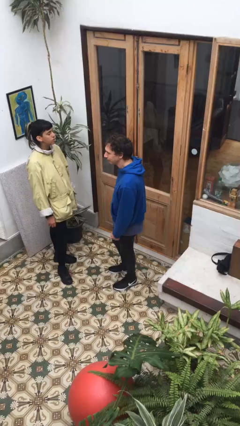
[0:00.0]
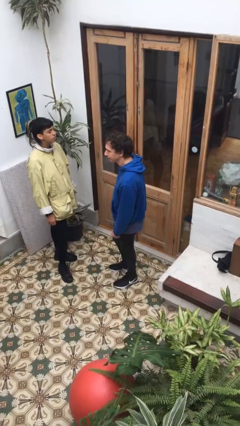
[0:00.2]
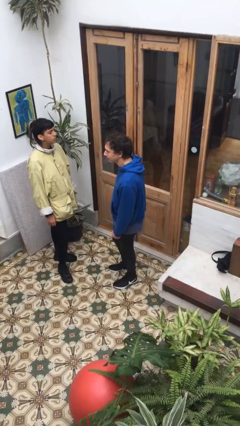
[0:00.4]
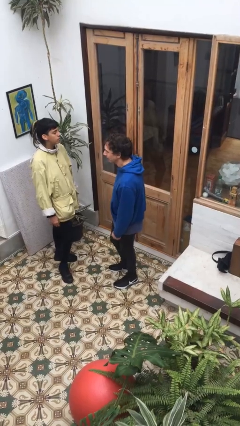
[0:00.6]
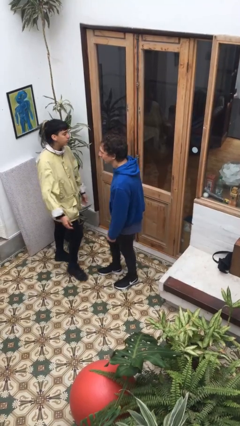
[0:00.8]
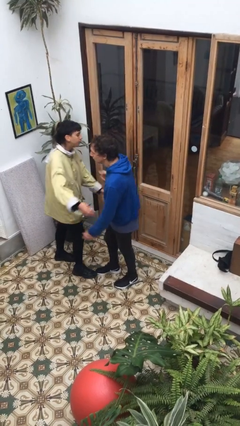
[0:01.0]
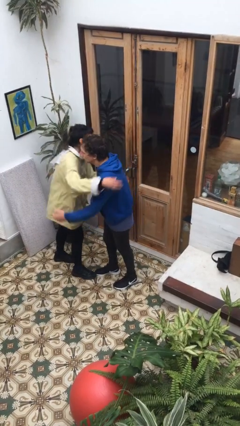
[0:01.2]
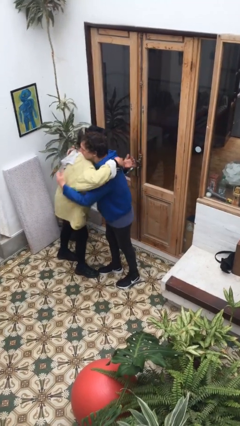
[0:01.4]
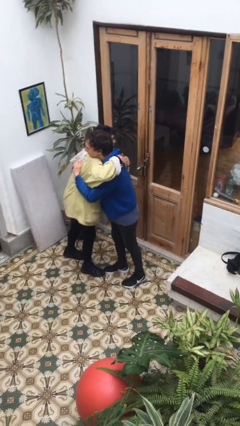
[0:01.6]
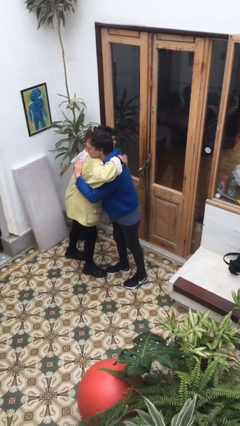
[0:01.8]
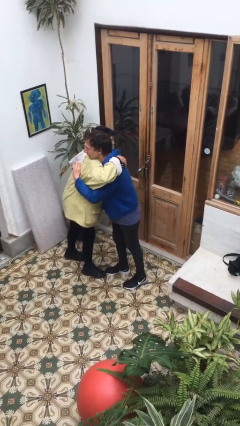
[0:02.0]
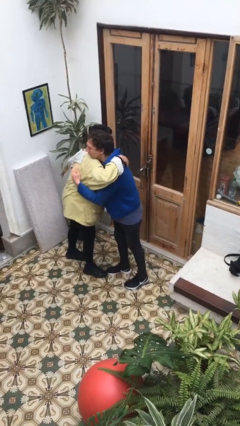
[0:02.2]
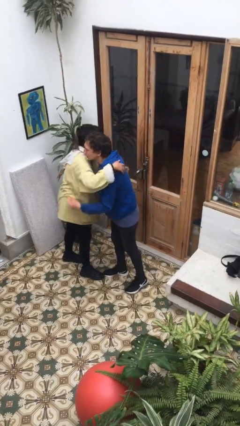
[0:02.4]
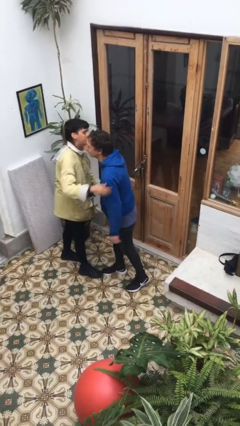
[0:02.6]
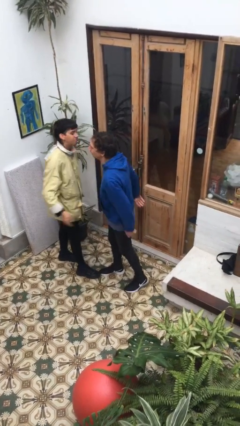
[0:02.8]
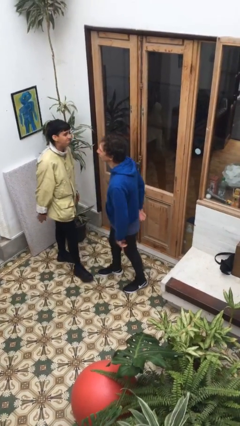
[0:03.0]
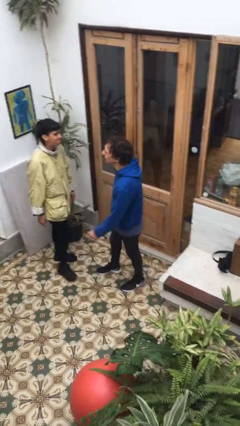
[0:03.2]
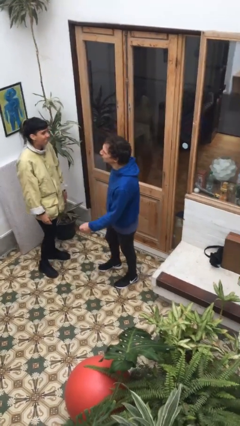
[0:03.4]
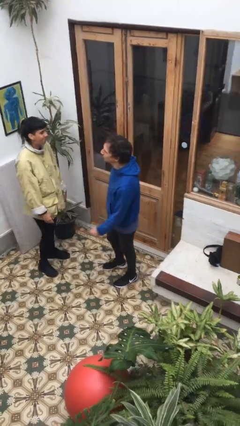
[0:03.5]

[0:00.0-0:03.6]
person embraces person

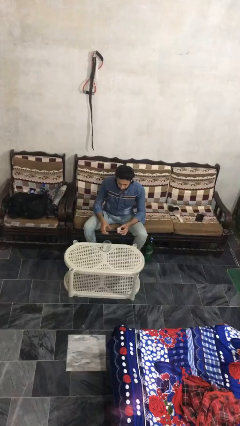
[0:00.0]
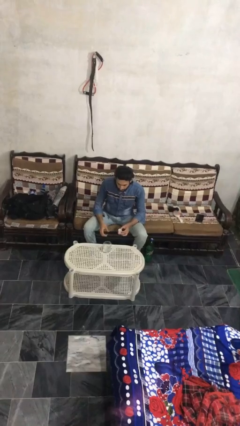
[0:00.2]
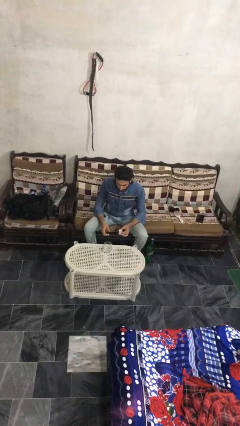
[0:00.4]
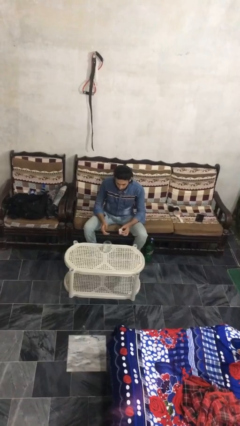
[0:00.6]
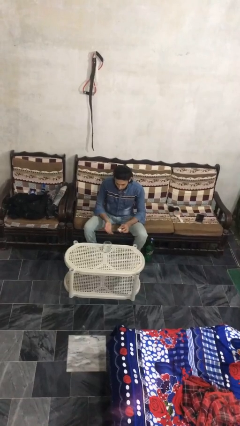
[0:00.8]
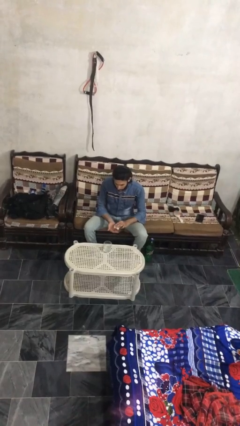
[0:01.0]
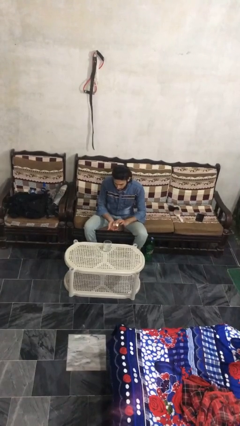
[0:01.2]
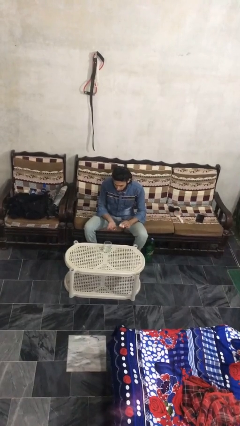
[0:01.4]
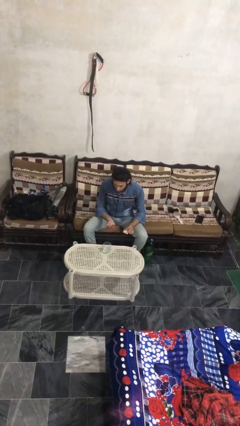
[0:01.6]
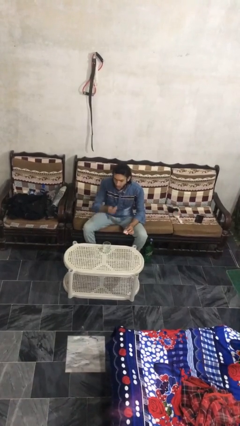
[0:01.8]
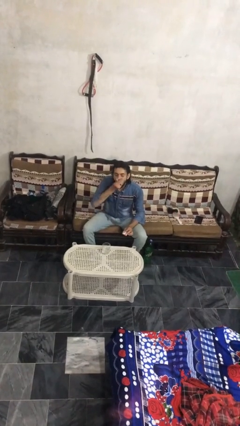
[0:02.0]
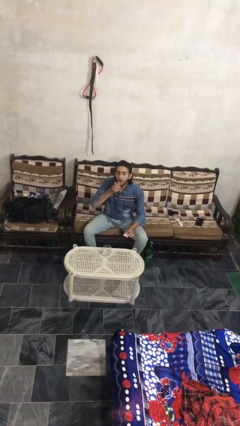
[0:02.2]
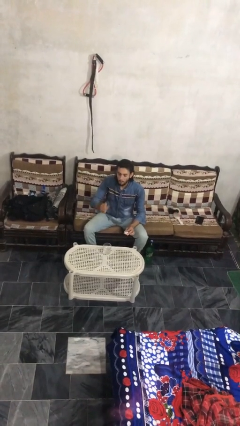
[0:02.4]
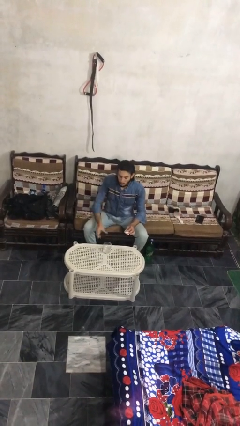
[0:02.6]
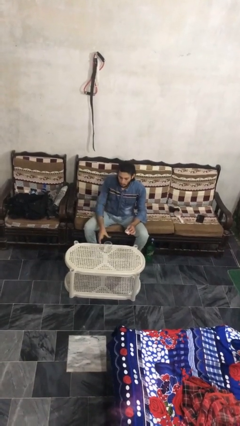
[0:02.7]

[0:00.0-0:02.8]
person takes medicine pills

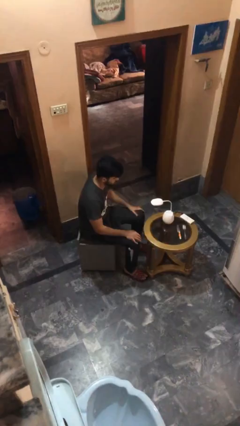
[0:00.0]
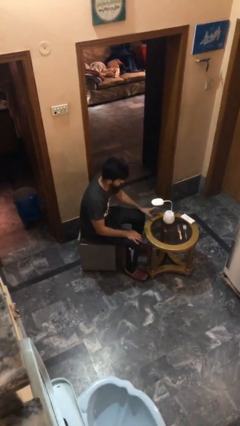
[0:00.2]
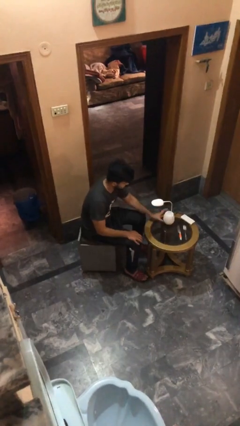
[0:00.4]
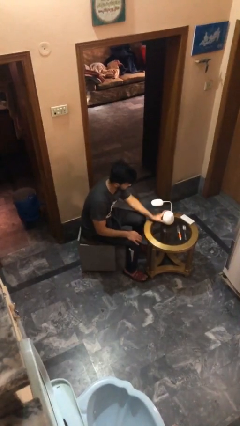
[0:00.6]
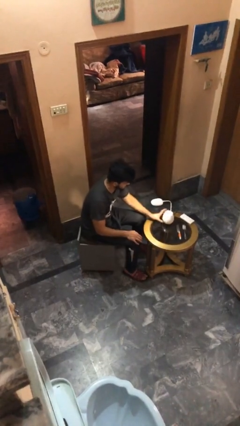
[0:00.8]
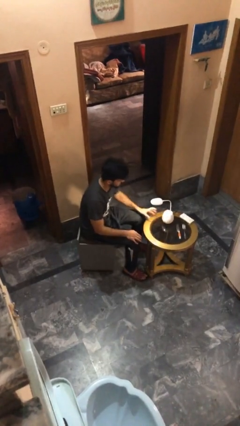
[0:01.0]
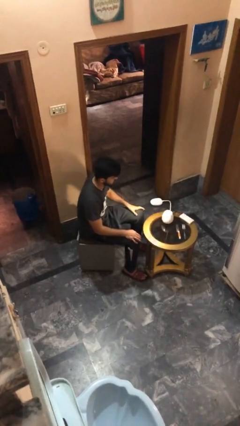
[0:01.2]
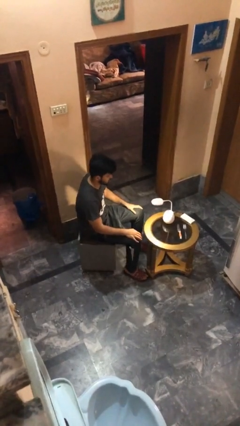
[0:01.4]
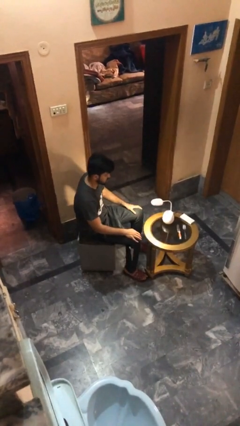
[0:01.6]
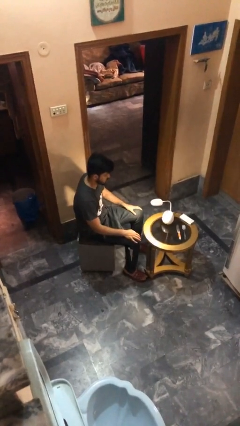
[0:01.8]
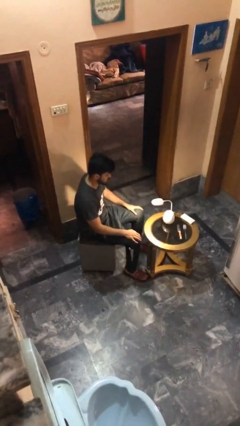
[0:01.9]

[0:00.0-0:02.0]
person turns on lamp

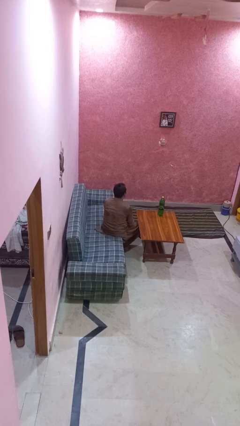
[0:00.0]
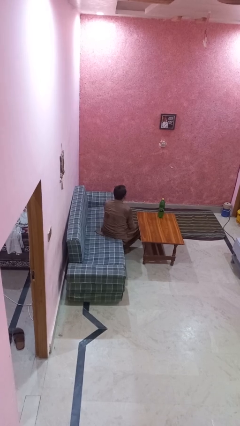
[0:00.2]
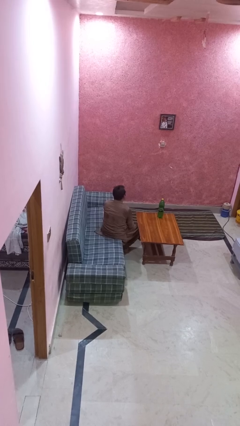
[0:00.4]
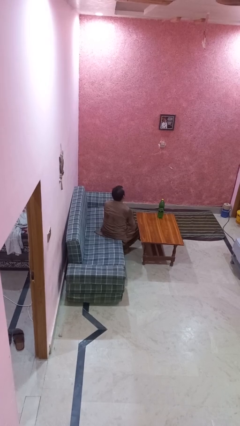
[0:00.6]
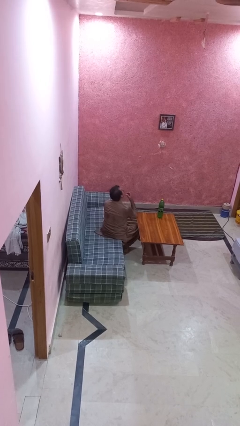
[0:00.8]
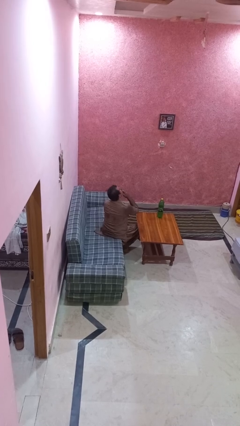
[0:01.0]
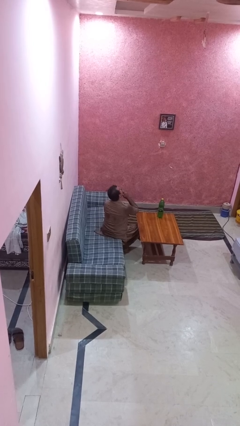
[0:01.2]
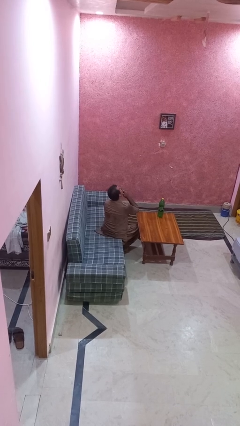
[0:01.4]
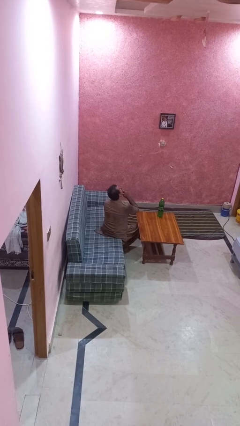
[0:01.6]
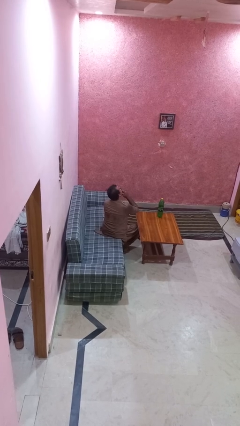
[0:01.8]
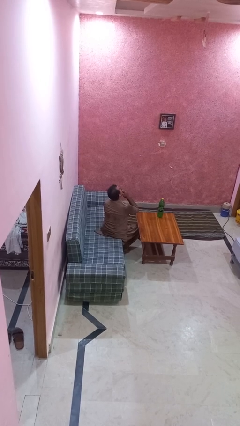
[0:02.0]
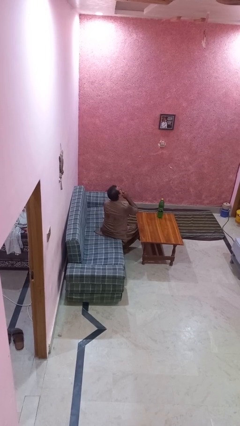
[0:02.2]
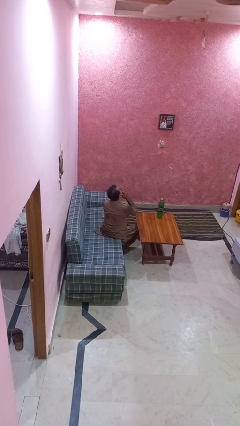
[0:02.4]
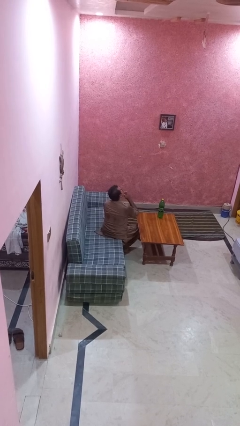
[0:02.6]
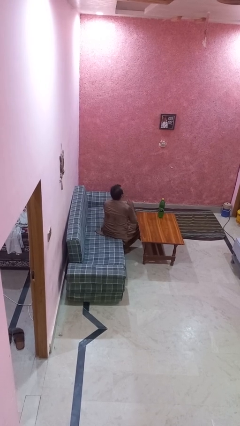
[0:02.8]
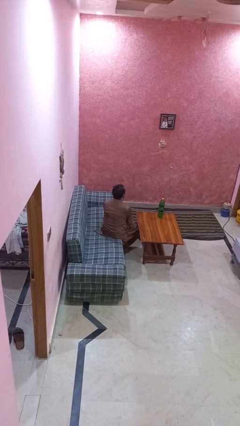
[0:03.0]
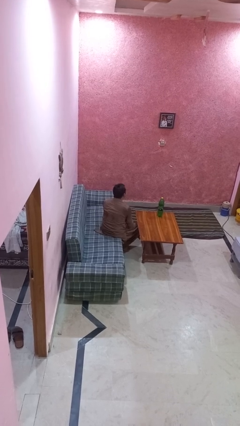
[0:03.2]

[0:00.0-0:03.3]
person strokes chin

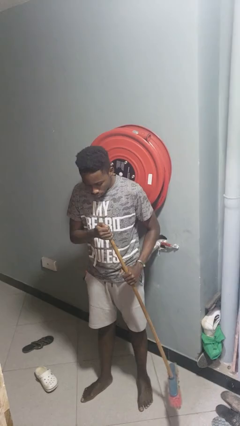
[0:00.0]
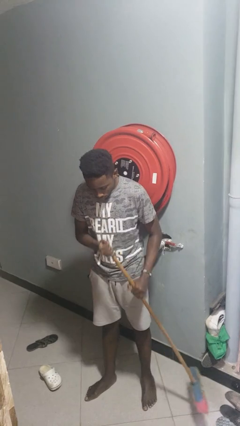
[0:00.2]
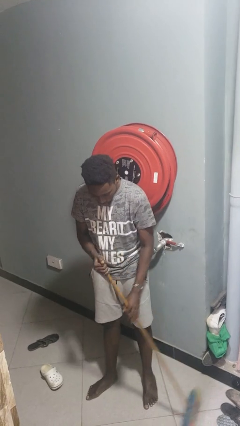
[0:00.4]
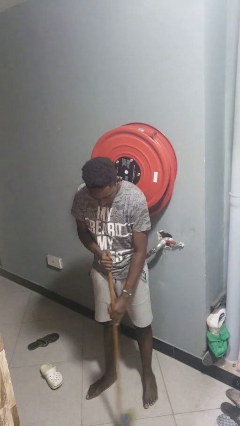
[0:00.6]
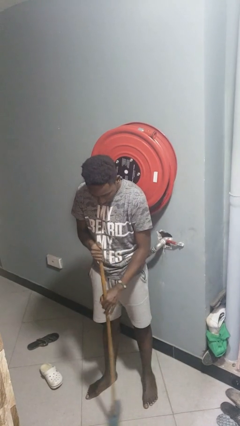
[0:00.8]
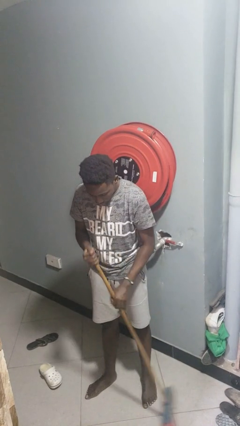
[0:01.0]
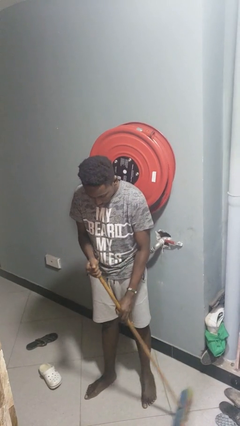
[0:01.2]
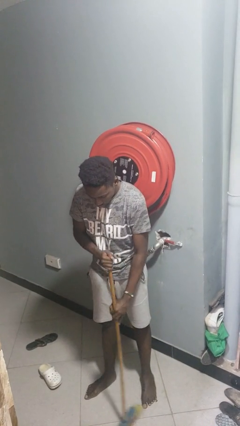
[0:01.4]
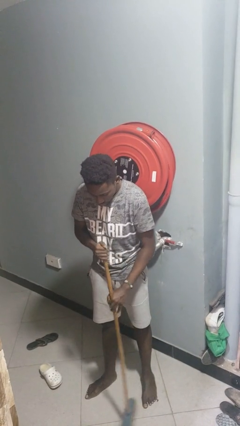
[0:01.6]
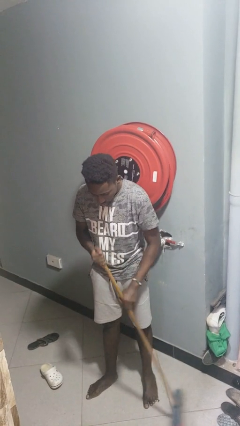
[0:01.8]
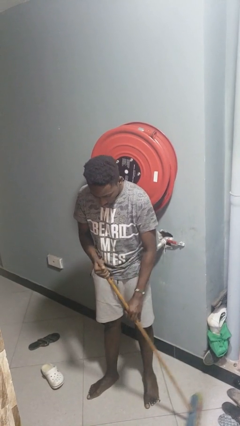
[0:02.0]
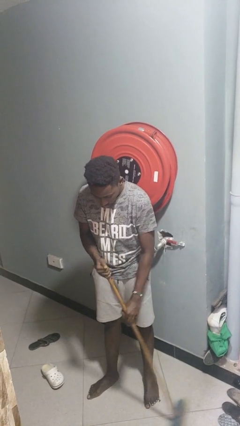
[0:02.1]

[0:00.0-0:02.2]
person sweeps floor

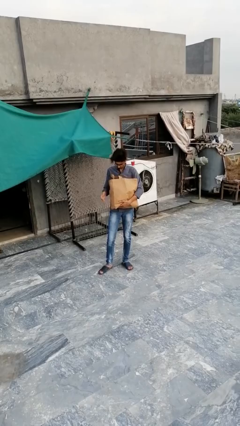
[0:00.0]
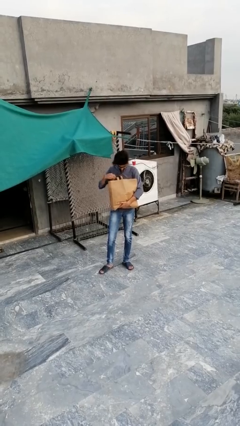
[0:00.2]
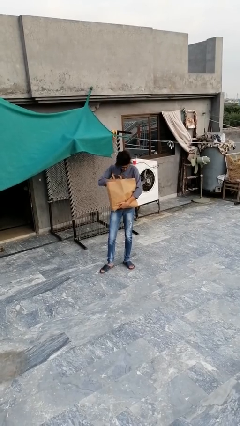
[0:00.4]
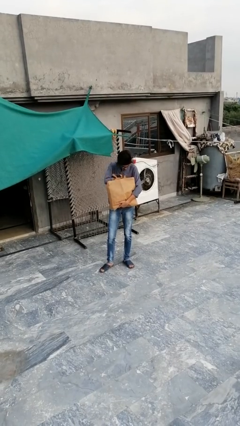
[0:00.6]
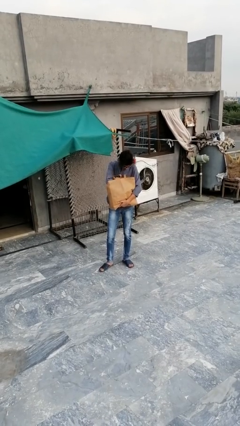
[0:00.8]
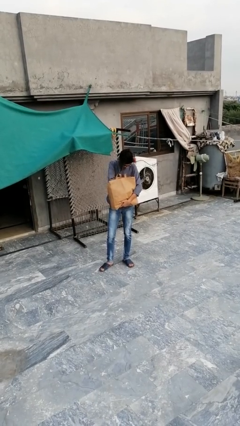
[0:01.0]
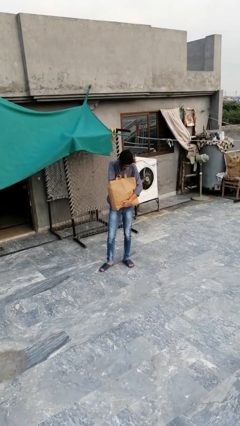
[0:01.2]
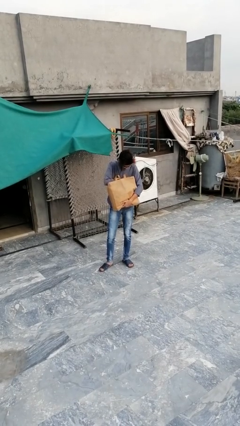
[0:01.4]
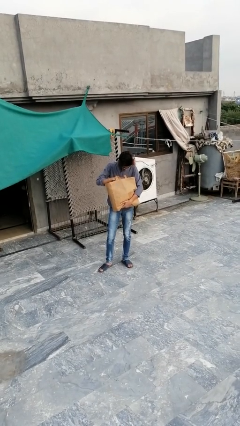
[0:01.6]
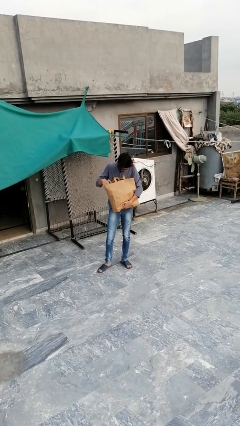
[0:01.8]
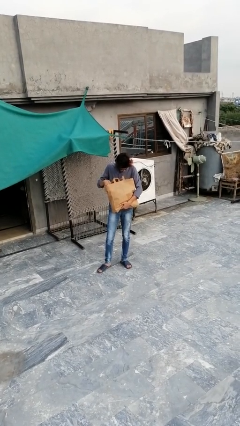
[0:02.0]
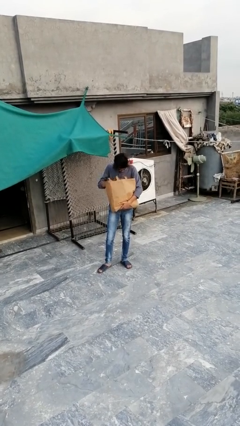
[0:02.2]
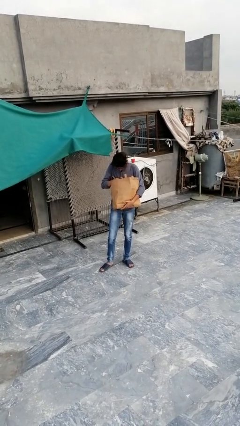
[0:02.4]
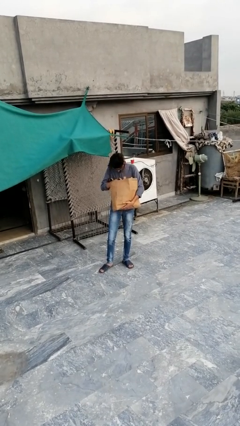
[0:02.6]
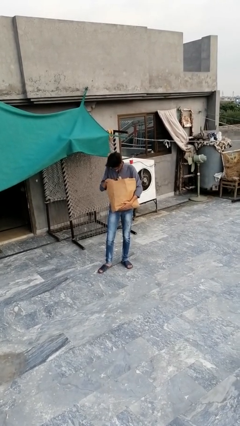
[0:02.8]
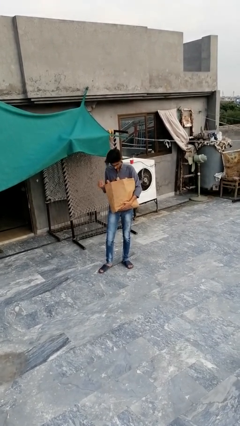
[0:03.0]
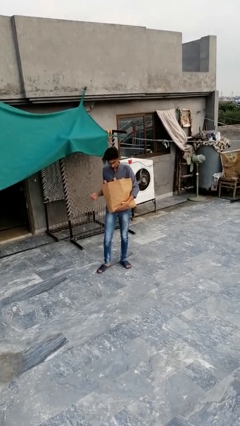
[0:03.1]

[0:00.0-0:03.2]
person searches in bag

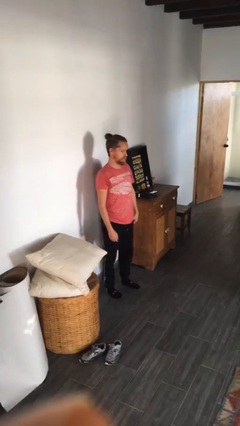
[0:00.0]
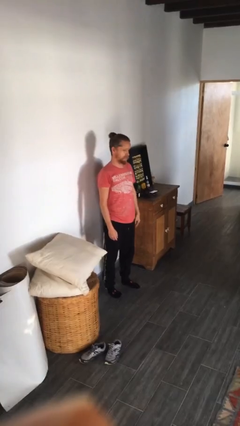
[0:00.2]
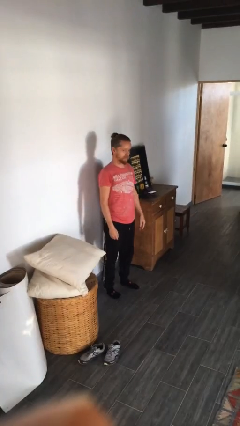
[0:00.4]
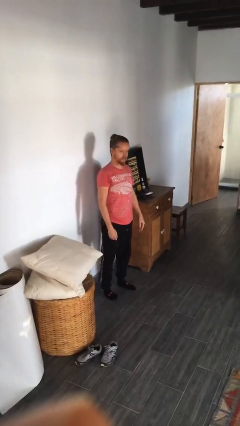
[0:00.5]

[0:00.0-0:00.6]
person gestures come here
